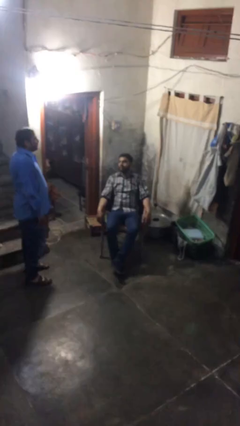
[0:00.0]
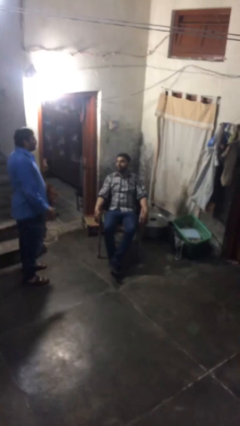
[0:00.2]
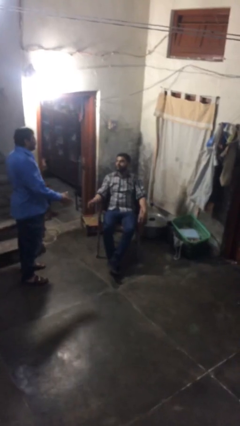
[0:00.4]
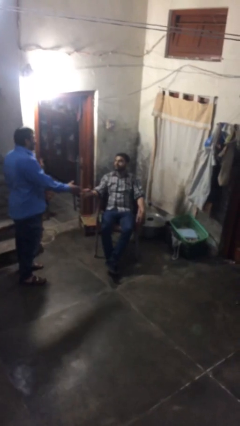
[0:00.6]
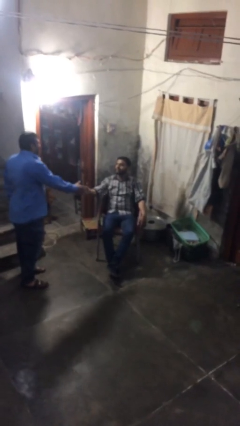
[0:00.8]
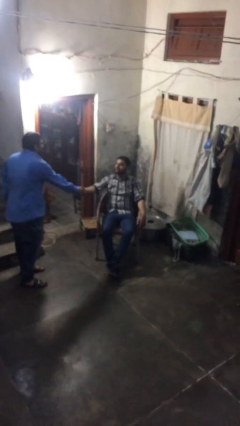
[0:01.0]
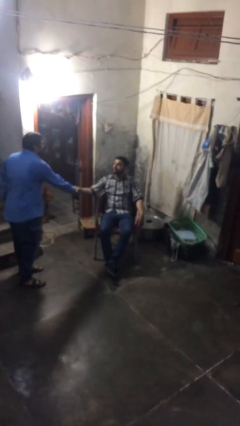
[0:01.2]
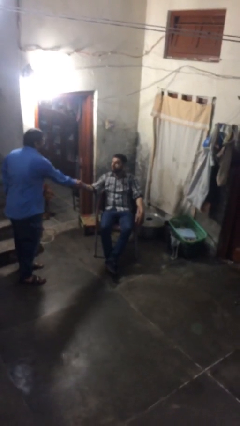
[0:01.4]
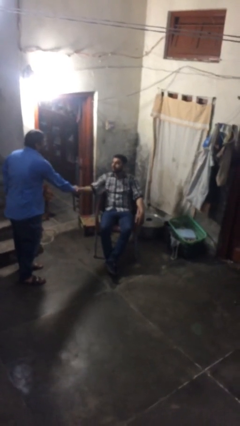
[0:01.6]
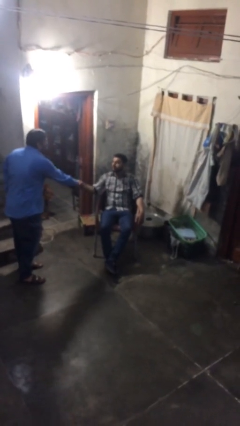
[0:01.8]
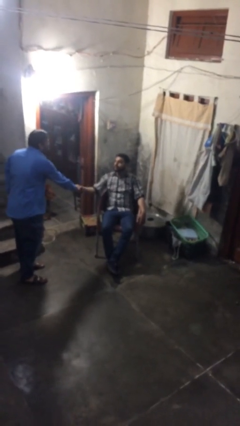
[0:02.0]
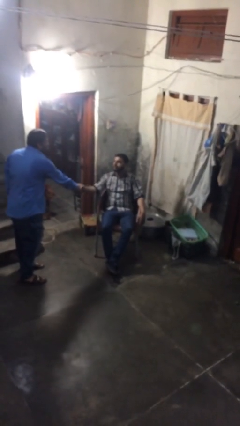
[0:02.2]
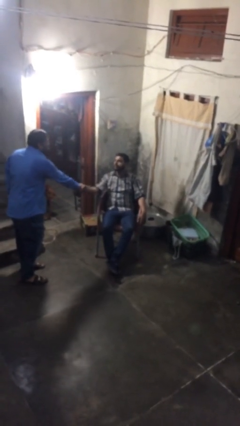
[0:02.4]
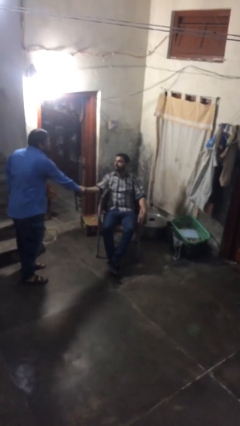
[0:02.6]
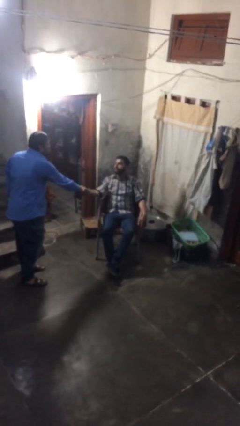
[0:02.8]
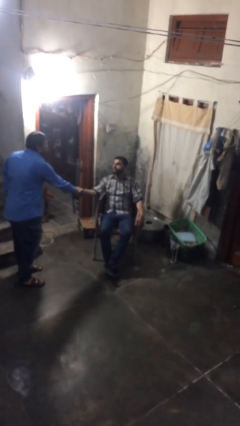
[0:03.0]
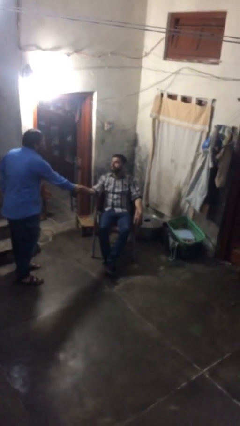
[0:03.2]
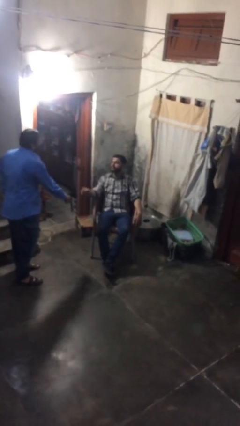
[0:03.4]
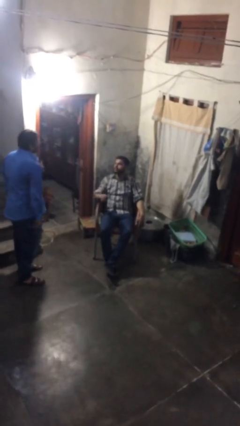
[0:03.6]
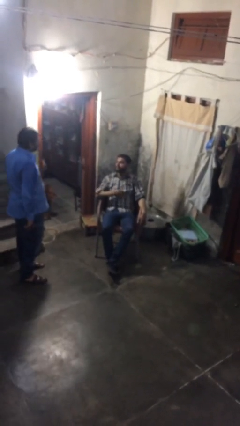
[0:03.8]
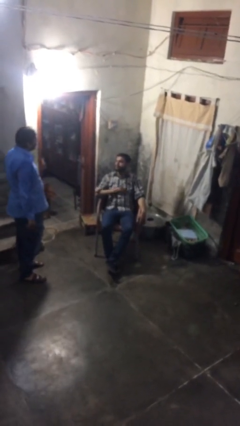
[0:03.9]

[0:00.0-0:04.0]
person shakes hand

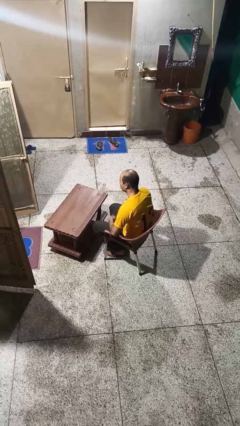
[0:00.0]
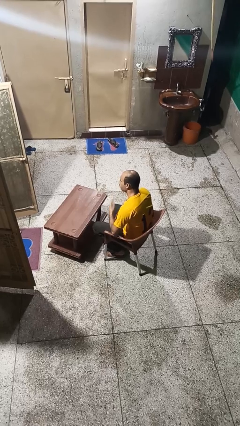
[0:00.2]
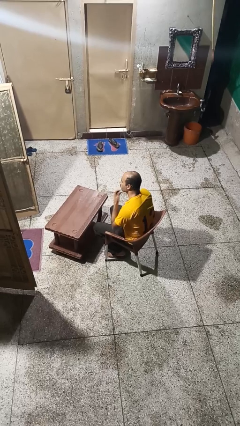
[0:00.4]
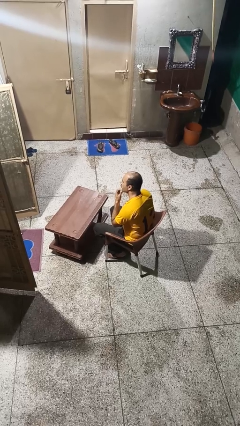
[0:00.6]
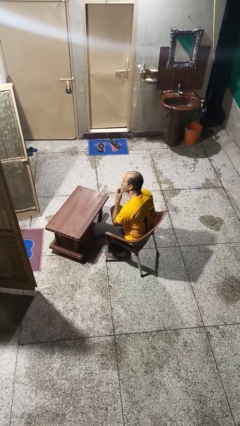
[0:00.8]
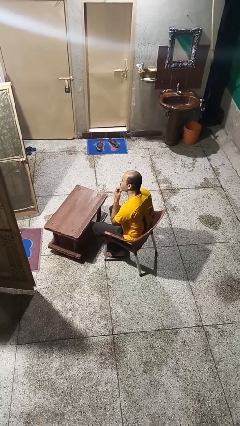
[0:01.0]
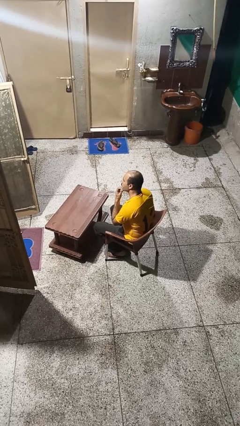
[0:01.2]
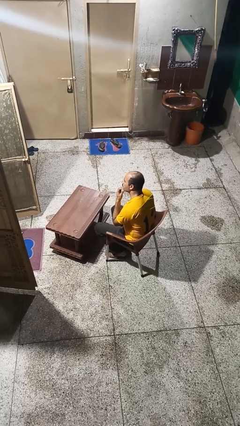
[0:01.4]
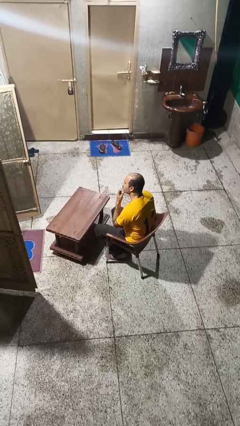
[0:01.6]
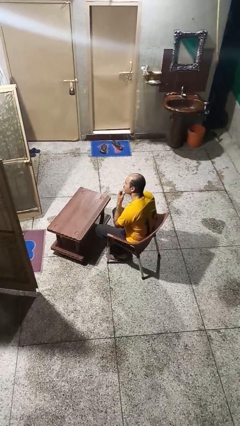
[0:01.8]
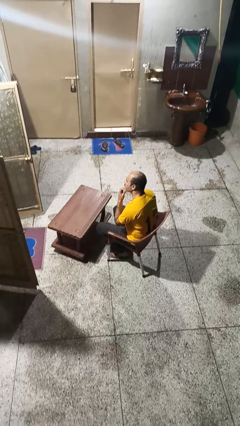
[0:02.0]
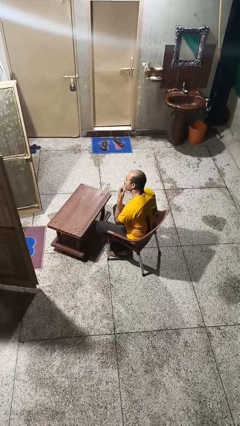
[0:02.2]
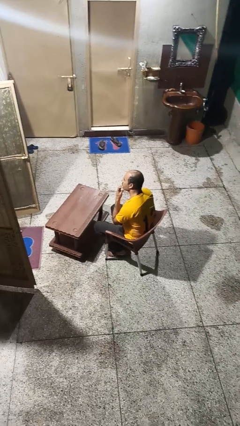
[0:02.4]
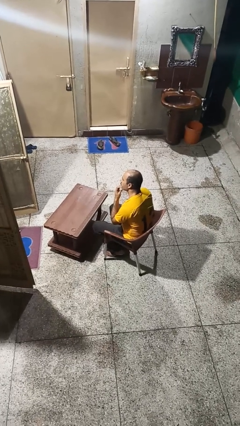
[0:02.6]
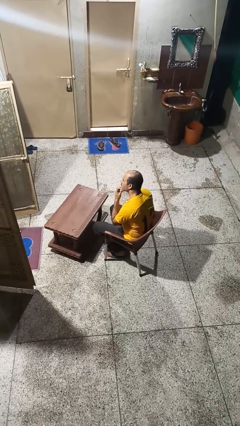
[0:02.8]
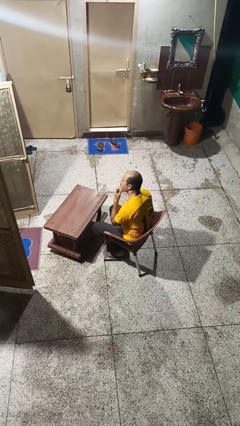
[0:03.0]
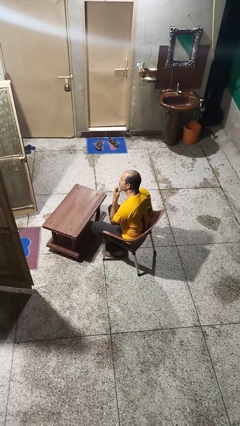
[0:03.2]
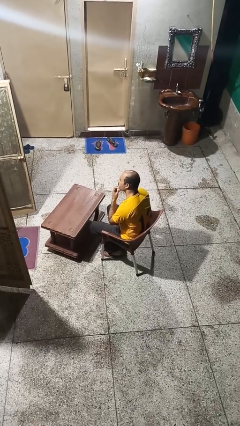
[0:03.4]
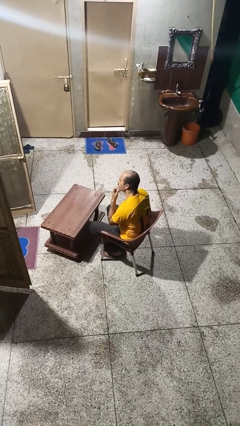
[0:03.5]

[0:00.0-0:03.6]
person strokes chin

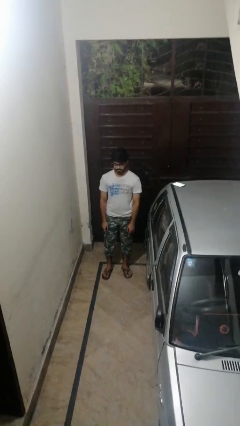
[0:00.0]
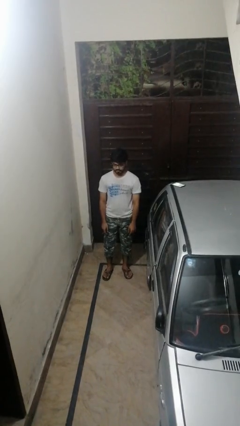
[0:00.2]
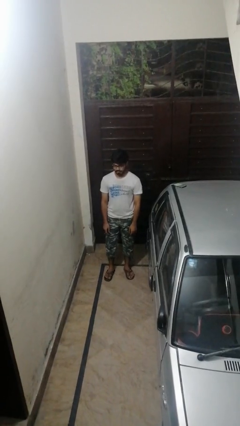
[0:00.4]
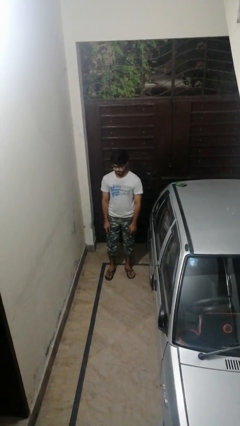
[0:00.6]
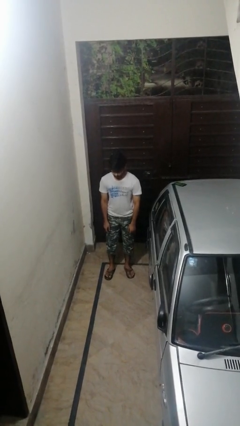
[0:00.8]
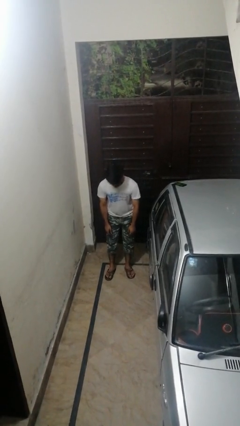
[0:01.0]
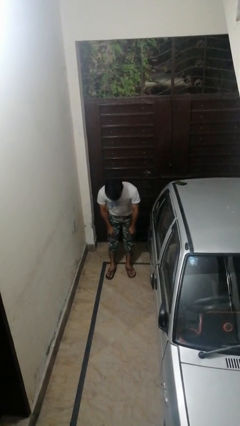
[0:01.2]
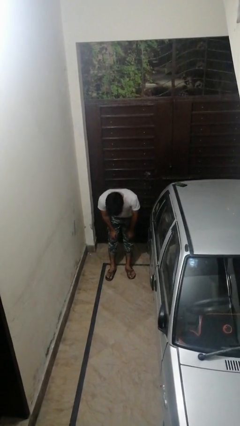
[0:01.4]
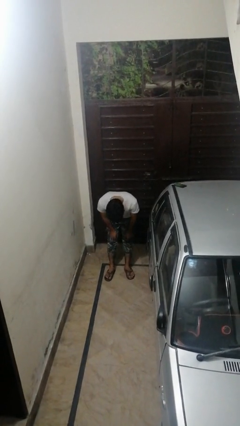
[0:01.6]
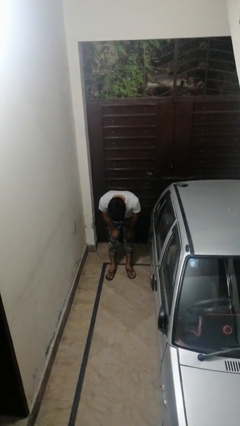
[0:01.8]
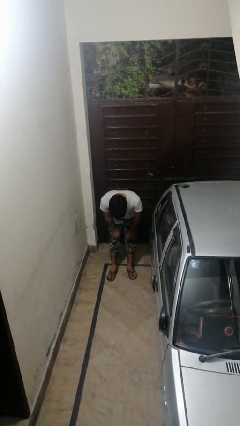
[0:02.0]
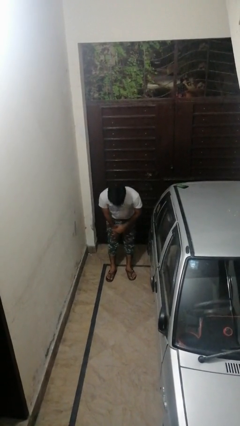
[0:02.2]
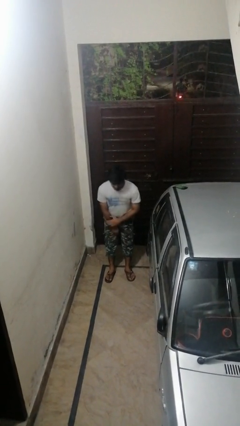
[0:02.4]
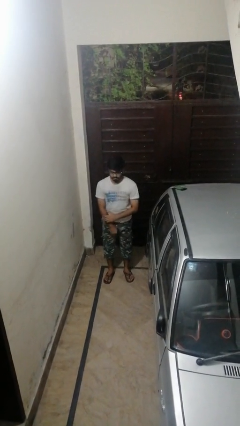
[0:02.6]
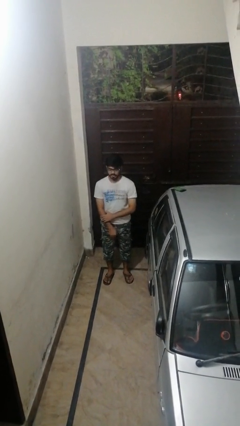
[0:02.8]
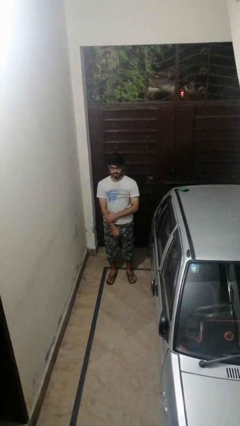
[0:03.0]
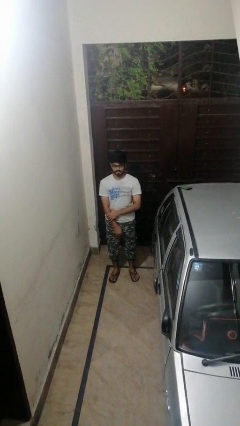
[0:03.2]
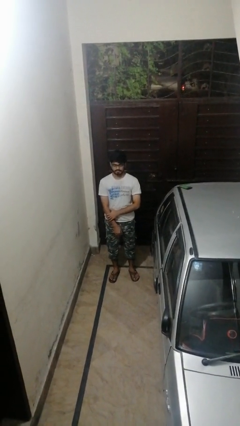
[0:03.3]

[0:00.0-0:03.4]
person bows

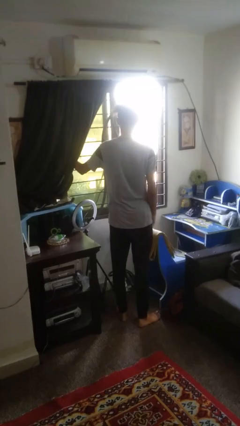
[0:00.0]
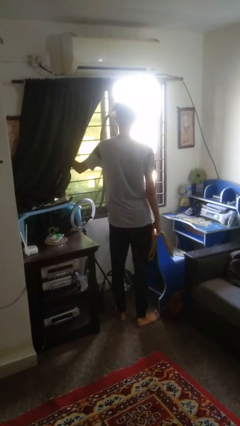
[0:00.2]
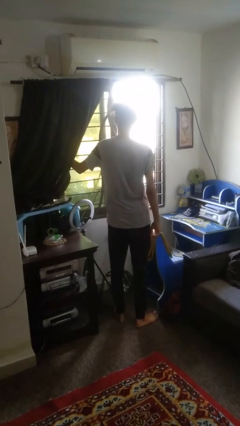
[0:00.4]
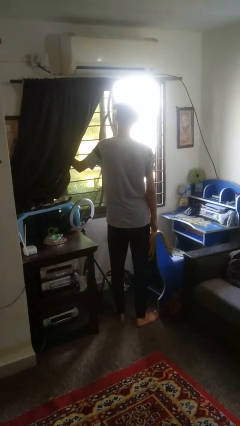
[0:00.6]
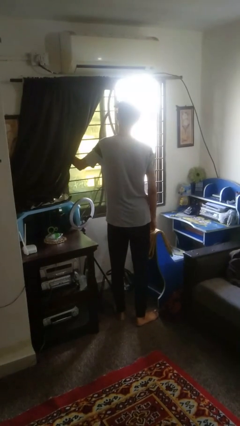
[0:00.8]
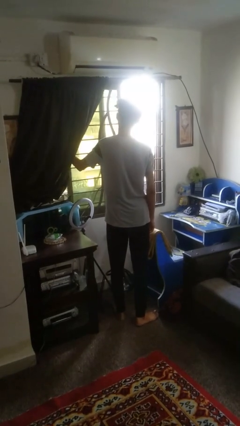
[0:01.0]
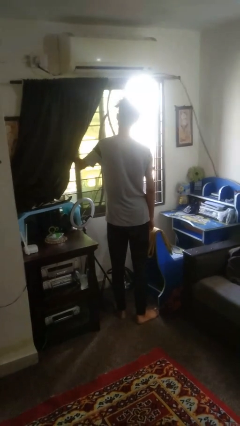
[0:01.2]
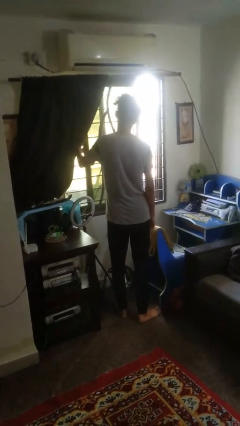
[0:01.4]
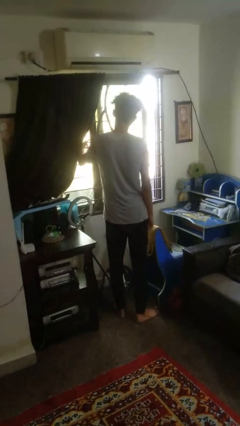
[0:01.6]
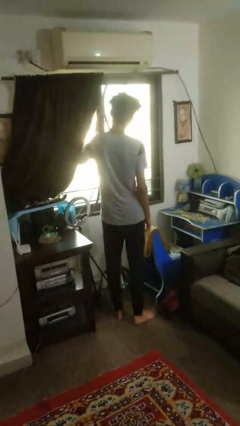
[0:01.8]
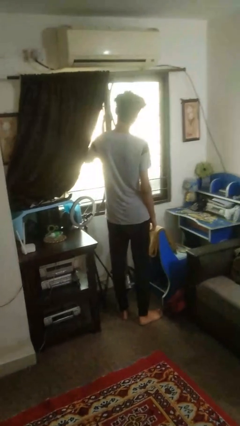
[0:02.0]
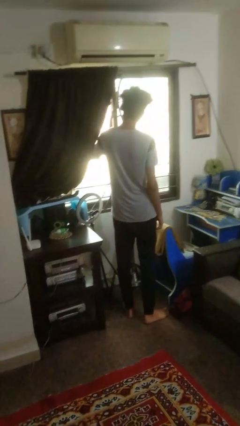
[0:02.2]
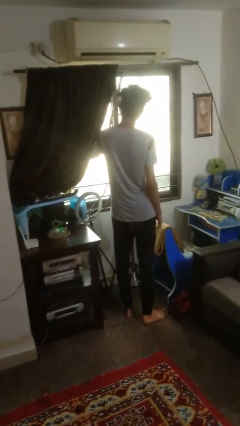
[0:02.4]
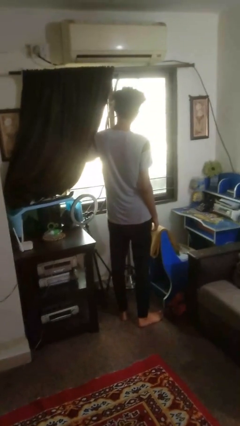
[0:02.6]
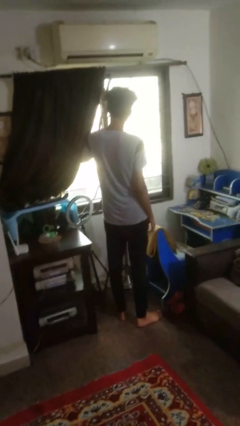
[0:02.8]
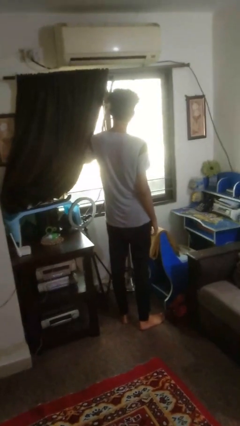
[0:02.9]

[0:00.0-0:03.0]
person closes home window

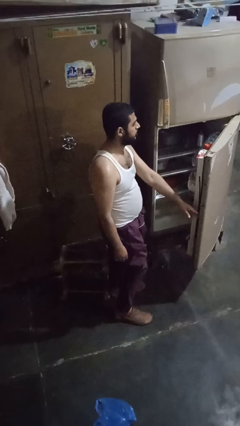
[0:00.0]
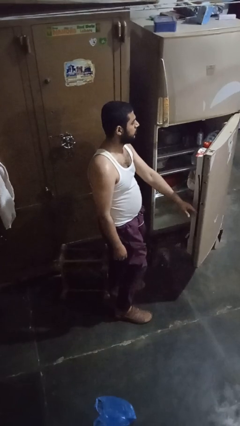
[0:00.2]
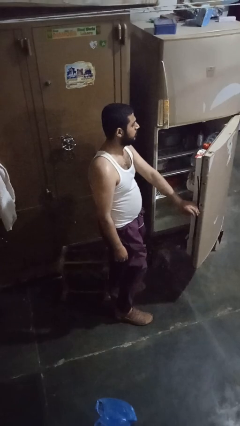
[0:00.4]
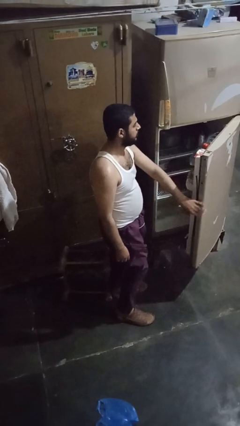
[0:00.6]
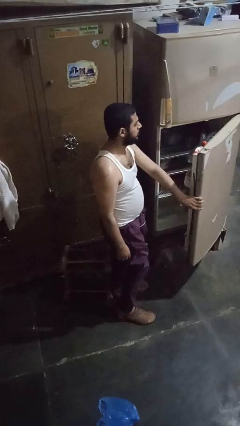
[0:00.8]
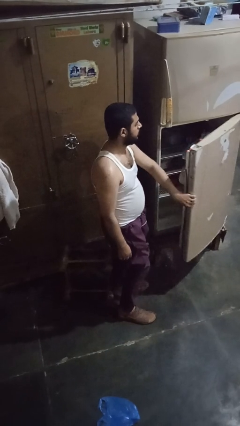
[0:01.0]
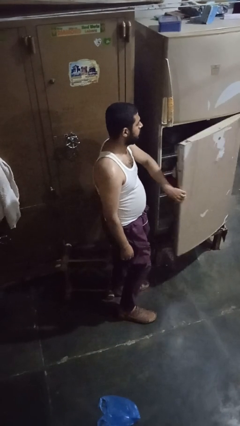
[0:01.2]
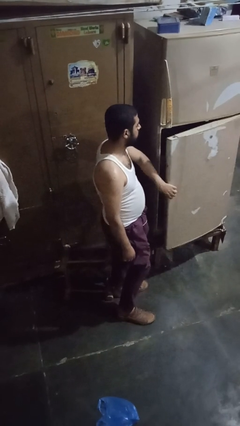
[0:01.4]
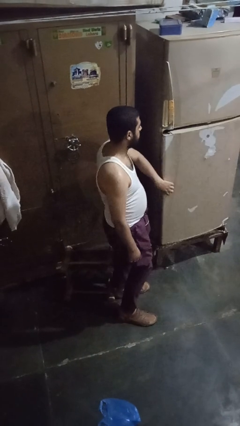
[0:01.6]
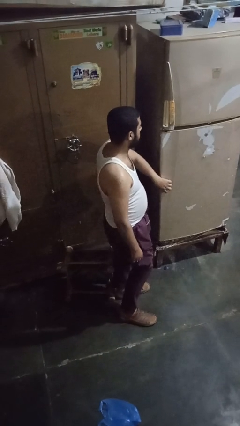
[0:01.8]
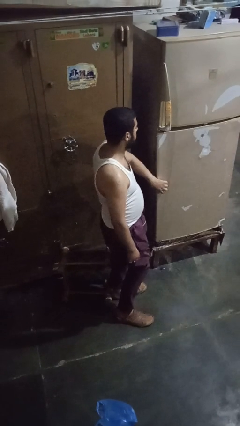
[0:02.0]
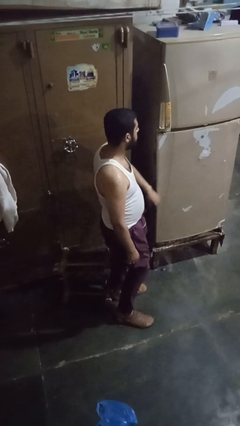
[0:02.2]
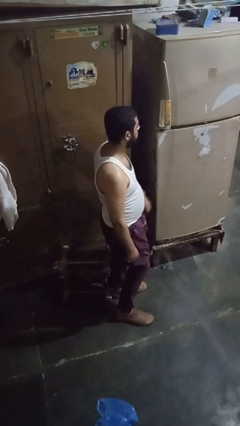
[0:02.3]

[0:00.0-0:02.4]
person closes refrigerator

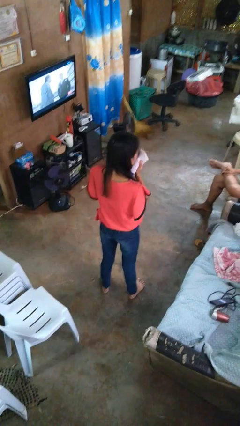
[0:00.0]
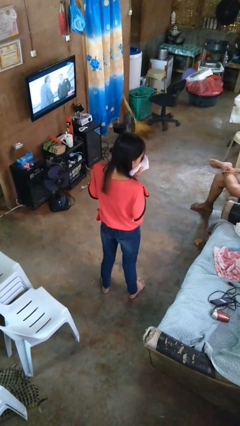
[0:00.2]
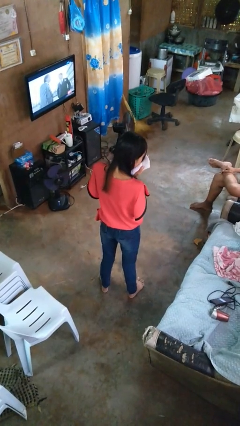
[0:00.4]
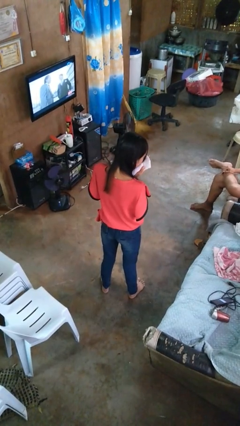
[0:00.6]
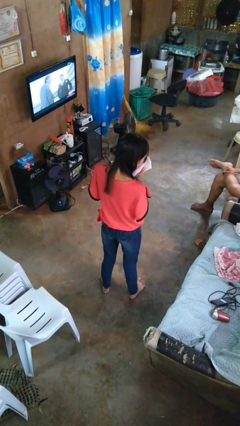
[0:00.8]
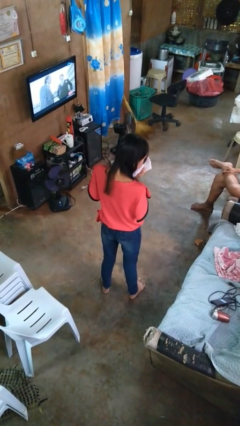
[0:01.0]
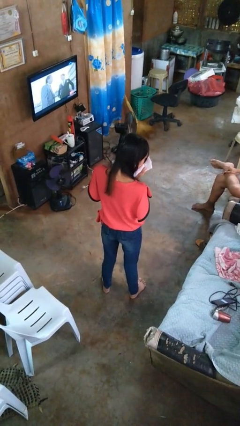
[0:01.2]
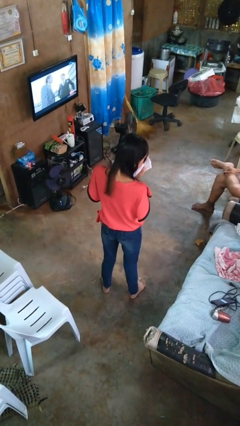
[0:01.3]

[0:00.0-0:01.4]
person blows nose
